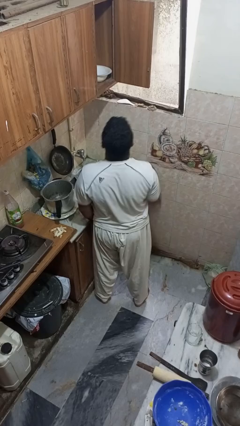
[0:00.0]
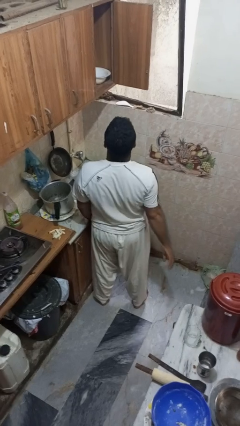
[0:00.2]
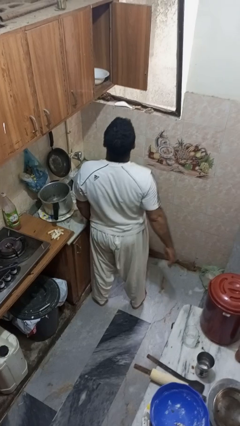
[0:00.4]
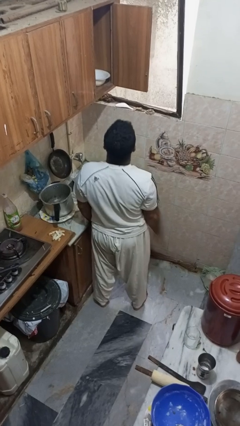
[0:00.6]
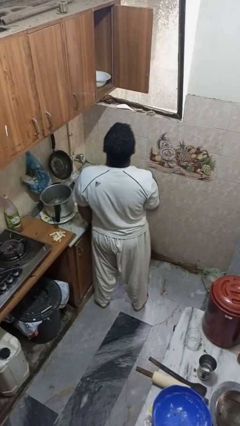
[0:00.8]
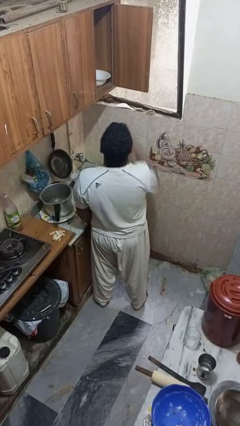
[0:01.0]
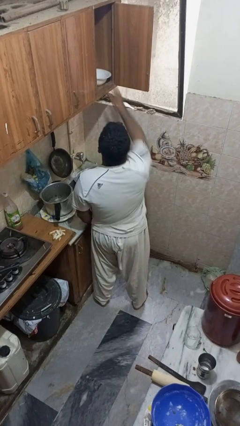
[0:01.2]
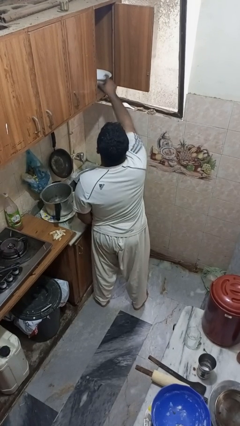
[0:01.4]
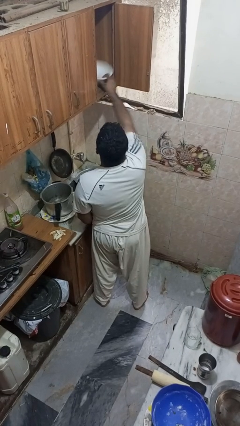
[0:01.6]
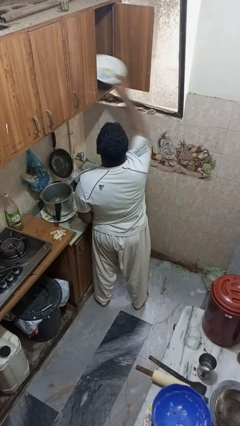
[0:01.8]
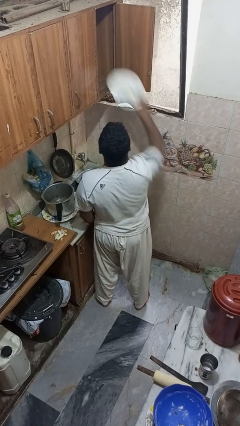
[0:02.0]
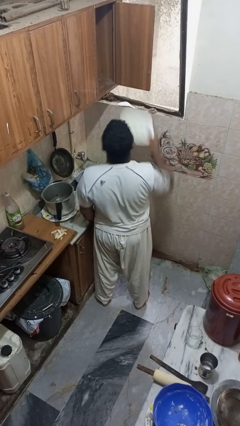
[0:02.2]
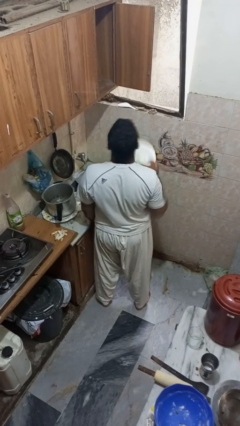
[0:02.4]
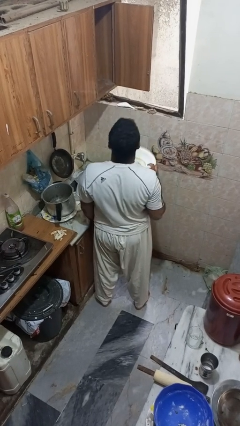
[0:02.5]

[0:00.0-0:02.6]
person takes object from cabinet

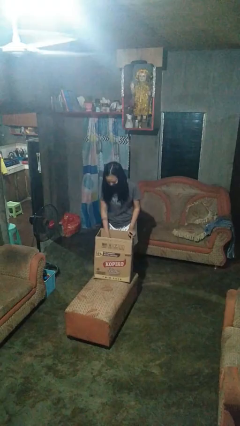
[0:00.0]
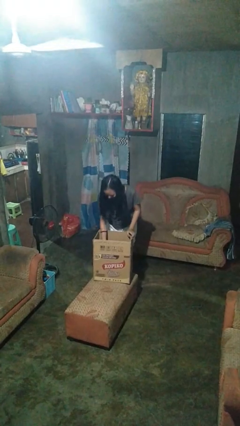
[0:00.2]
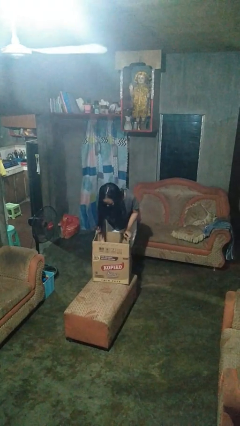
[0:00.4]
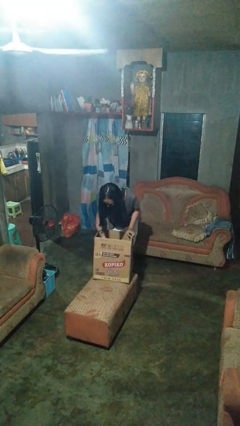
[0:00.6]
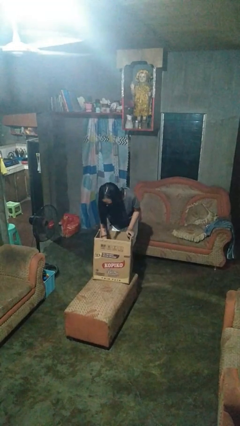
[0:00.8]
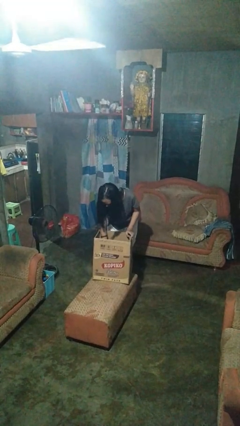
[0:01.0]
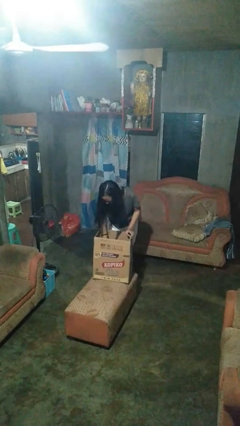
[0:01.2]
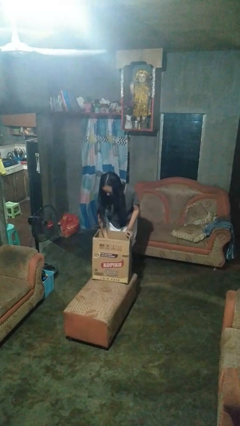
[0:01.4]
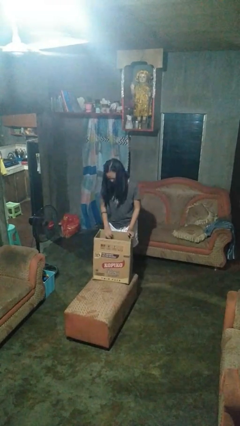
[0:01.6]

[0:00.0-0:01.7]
person searches in box

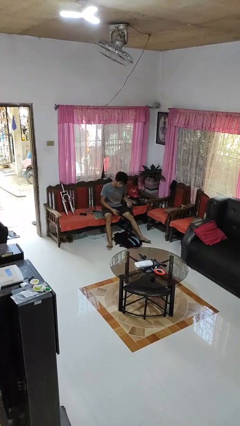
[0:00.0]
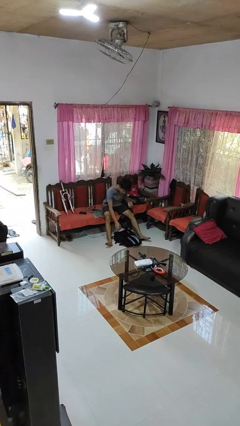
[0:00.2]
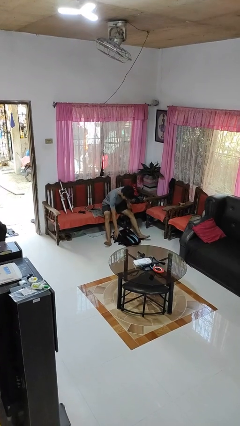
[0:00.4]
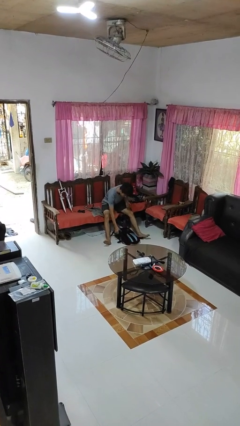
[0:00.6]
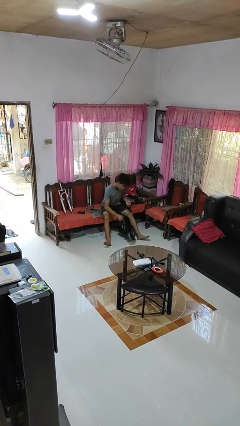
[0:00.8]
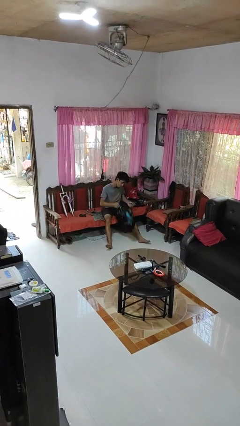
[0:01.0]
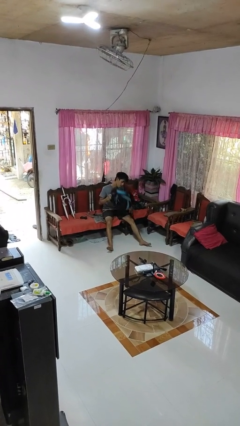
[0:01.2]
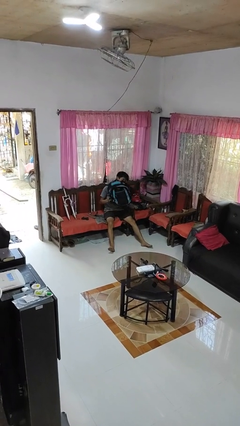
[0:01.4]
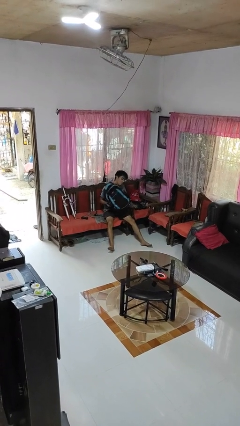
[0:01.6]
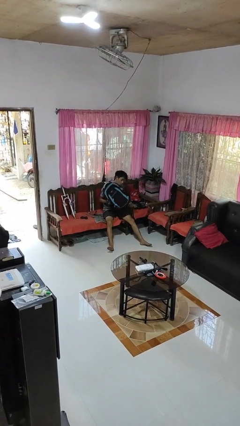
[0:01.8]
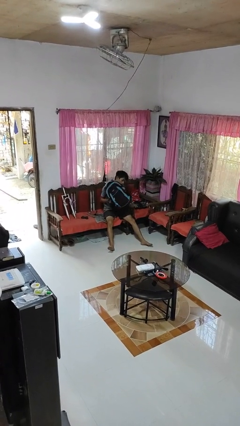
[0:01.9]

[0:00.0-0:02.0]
person picks up object from floor

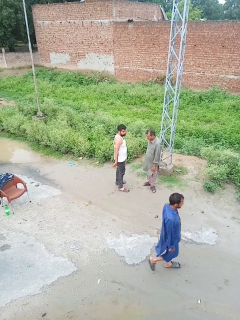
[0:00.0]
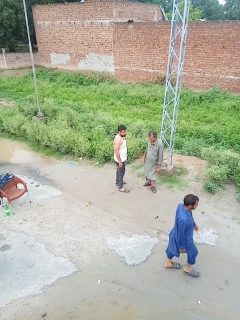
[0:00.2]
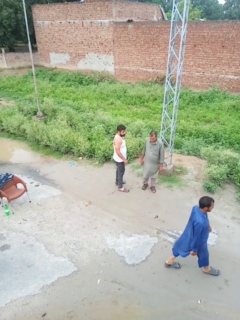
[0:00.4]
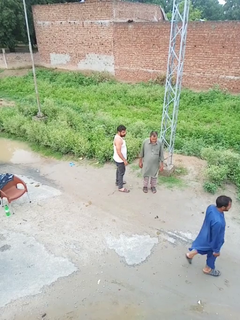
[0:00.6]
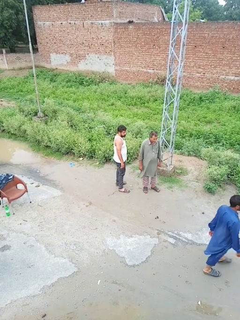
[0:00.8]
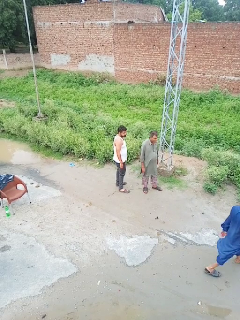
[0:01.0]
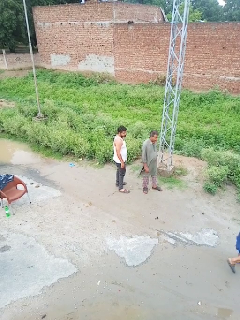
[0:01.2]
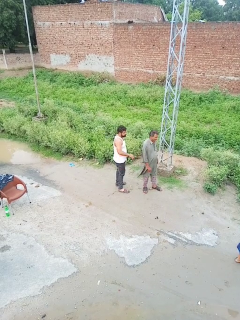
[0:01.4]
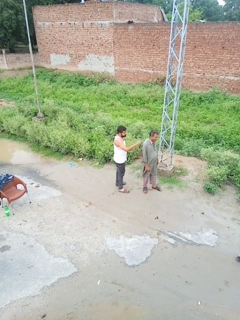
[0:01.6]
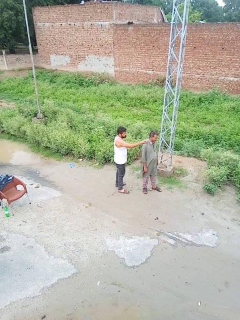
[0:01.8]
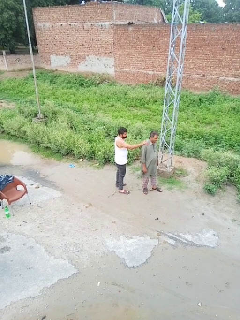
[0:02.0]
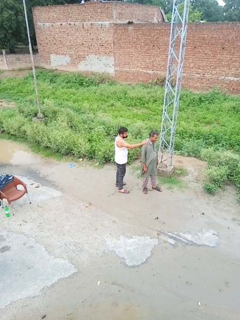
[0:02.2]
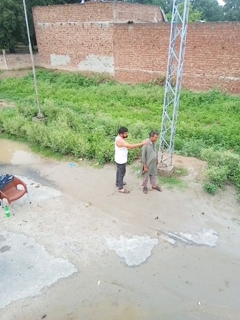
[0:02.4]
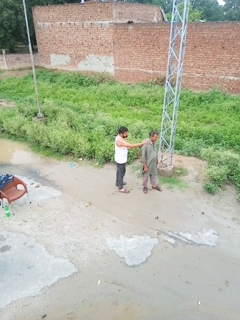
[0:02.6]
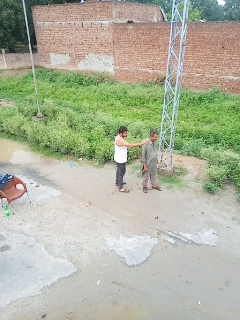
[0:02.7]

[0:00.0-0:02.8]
person grabs person by shoulder

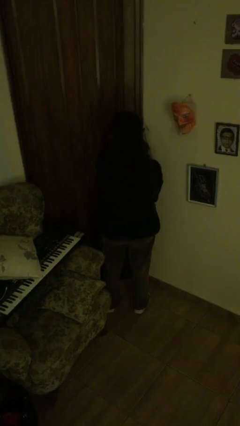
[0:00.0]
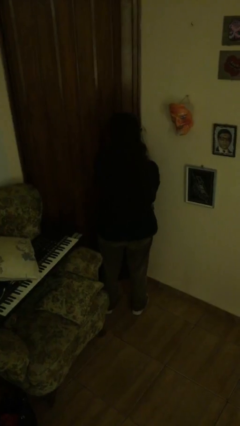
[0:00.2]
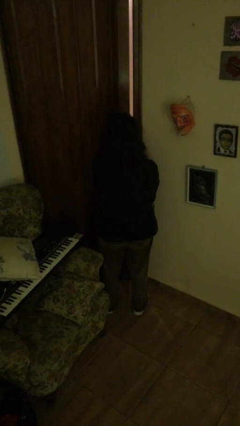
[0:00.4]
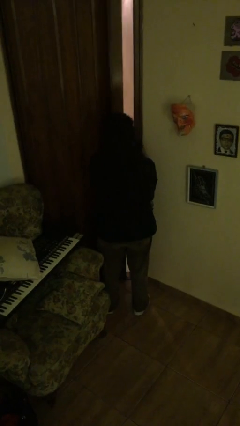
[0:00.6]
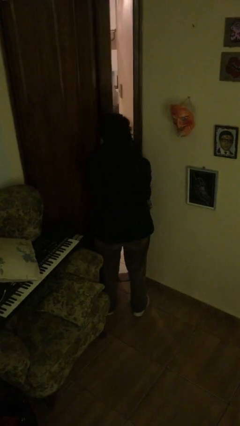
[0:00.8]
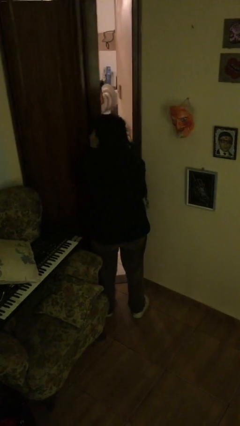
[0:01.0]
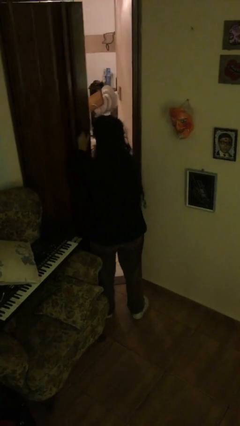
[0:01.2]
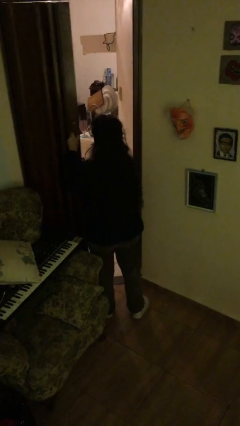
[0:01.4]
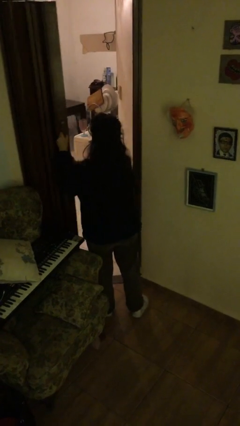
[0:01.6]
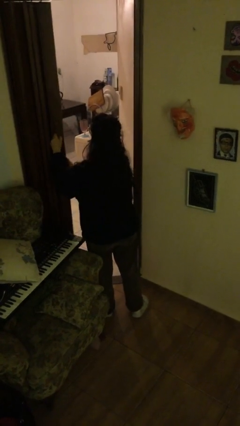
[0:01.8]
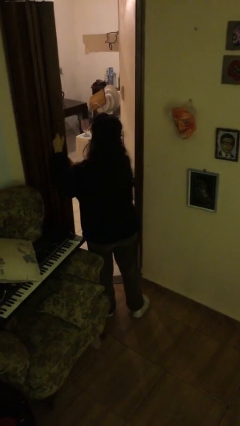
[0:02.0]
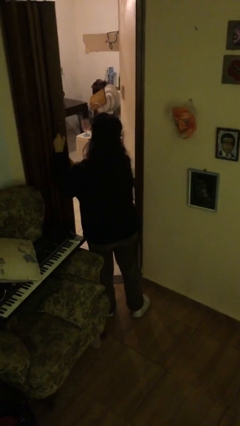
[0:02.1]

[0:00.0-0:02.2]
person opens sliding door

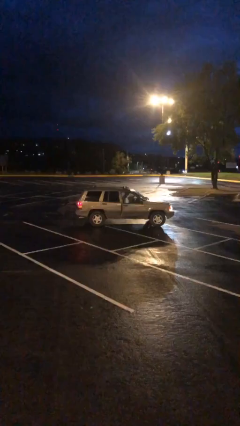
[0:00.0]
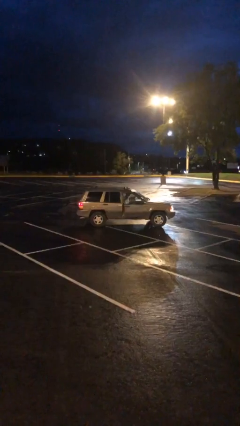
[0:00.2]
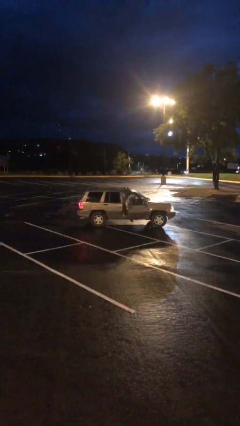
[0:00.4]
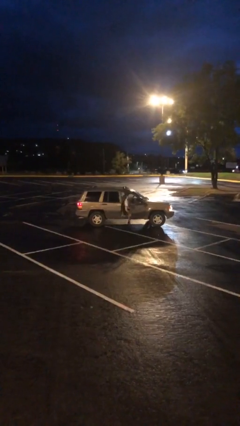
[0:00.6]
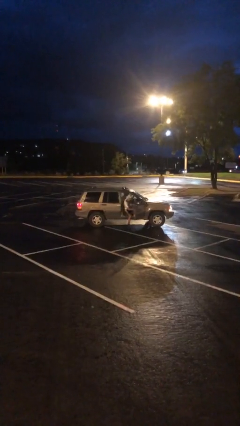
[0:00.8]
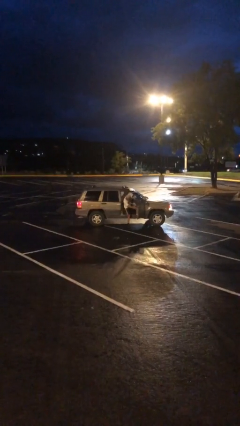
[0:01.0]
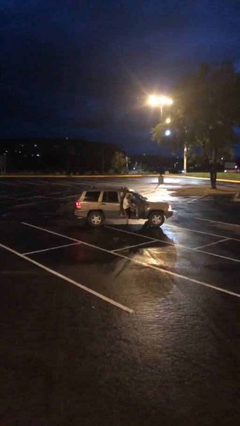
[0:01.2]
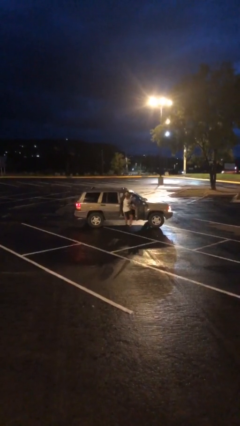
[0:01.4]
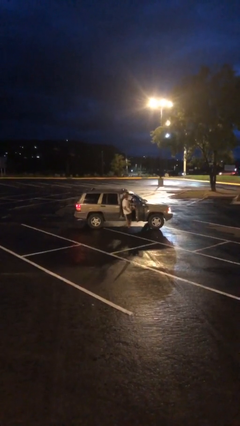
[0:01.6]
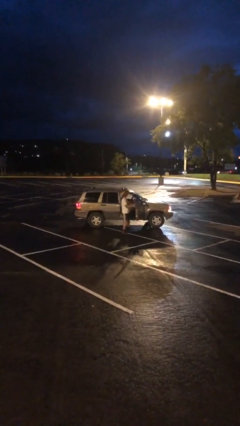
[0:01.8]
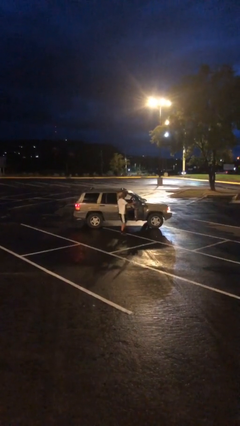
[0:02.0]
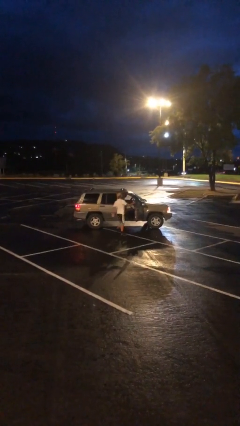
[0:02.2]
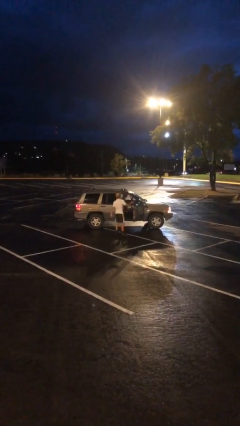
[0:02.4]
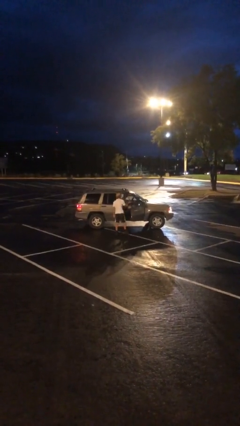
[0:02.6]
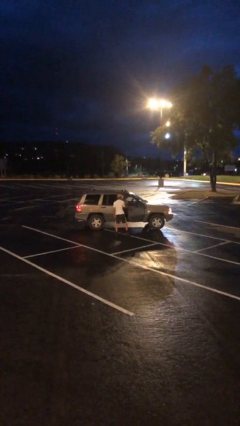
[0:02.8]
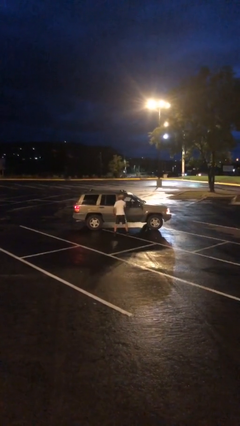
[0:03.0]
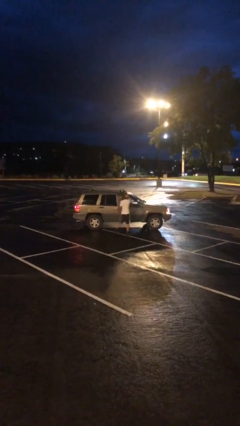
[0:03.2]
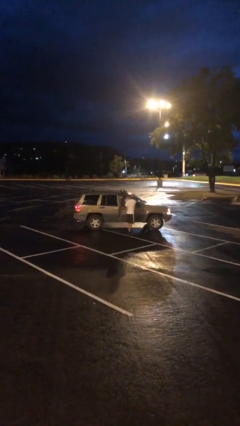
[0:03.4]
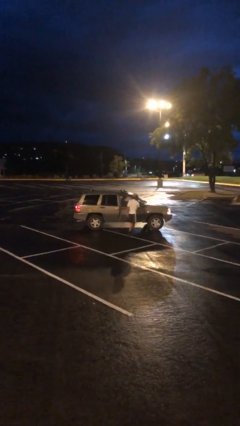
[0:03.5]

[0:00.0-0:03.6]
car drops off person

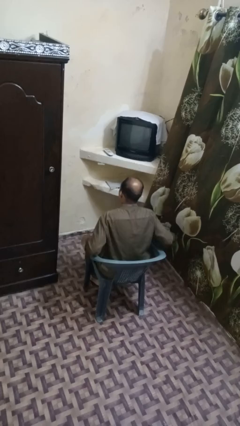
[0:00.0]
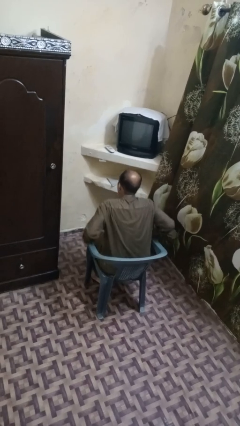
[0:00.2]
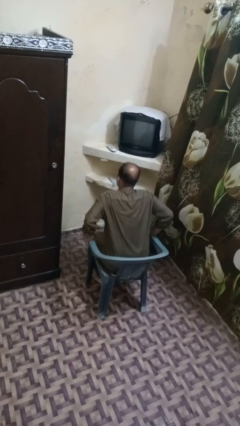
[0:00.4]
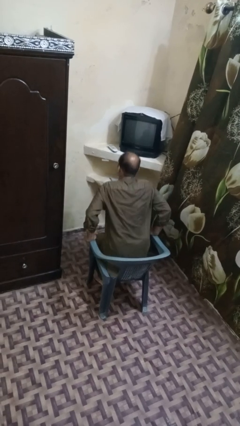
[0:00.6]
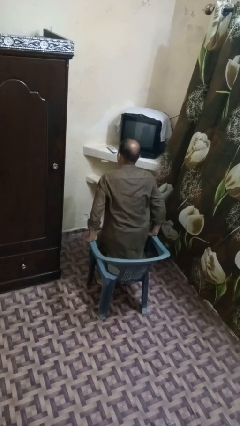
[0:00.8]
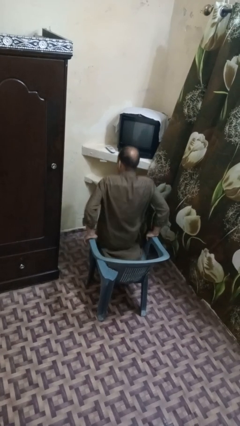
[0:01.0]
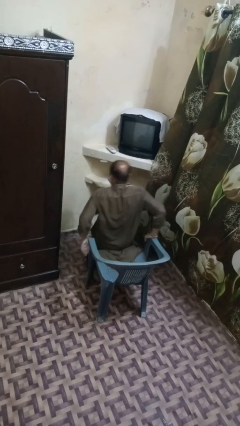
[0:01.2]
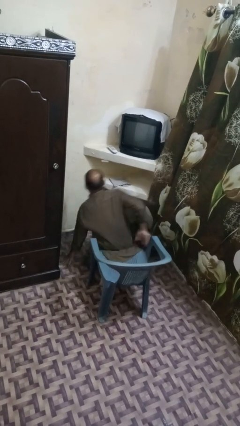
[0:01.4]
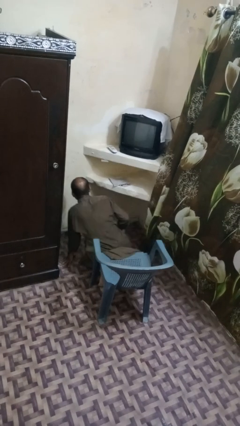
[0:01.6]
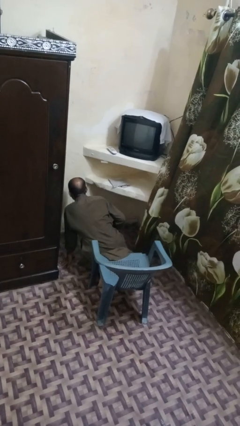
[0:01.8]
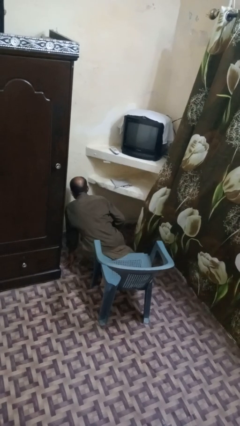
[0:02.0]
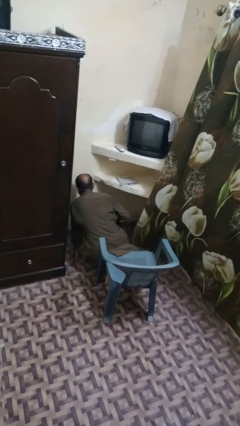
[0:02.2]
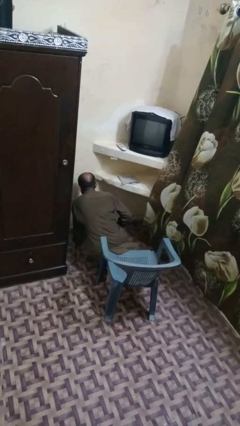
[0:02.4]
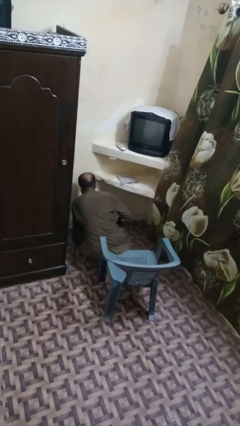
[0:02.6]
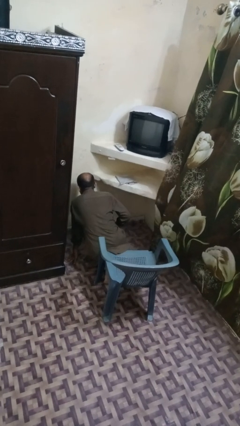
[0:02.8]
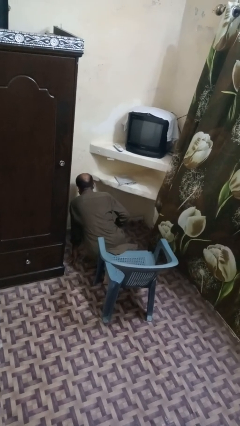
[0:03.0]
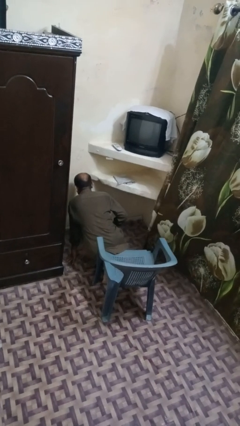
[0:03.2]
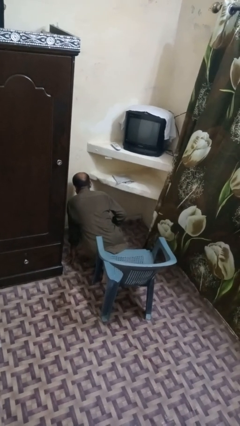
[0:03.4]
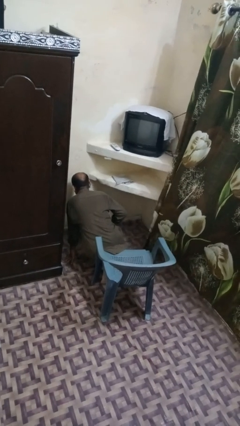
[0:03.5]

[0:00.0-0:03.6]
person falls from chair
